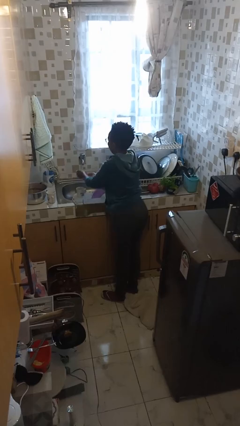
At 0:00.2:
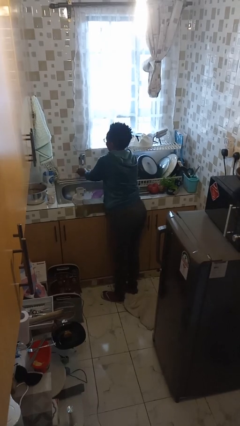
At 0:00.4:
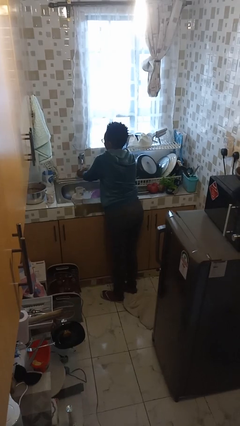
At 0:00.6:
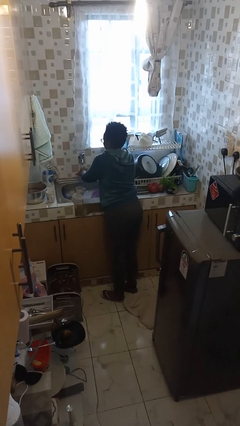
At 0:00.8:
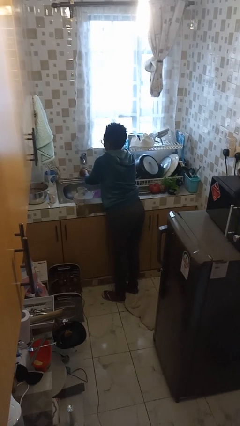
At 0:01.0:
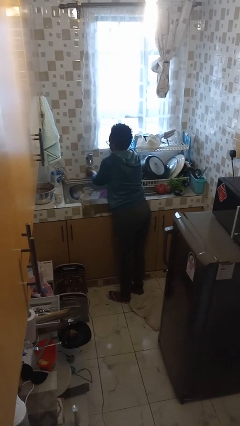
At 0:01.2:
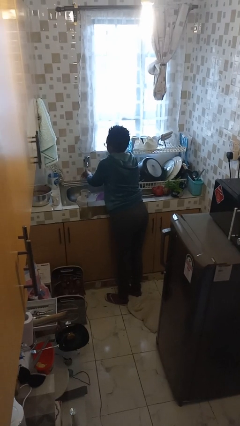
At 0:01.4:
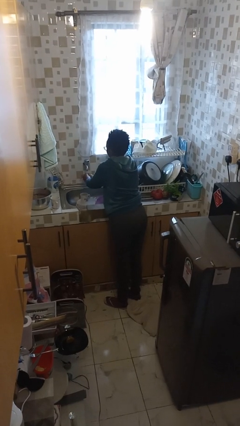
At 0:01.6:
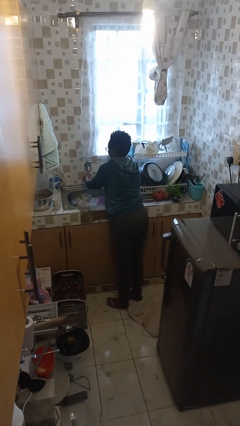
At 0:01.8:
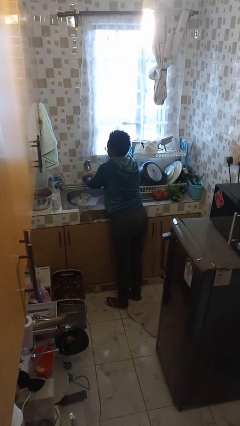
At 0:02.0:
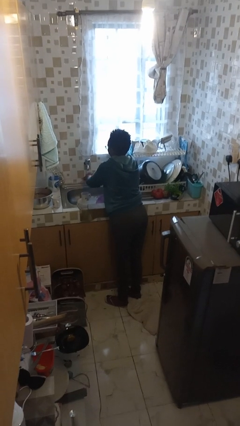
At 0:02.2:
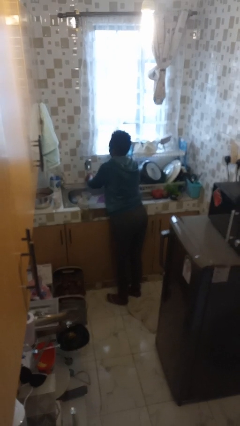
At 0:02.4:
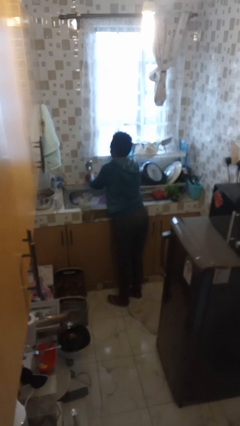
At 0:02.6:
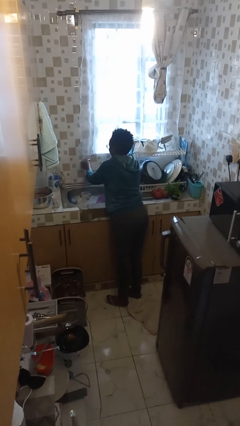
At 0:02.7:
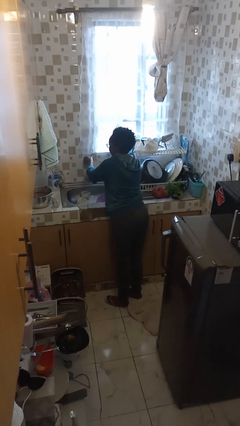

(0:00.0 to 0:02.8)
person washes hands

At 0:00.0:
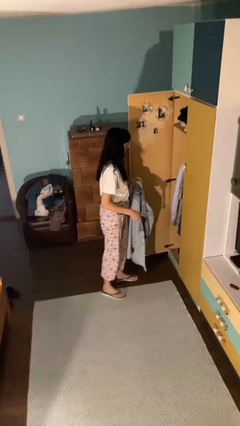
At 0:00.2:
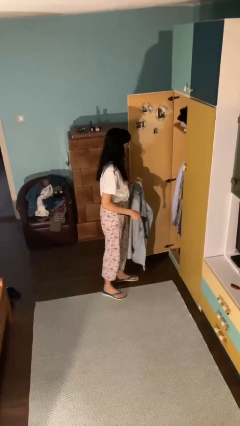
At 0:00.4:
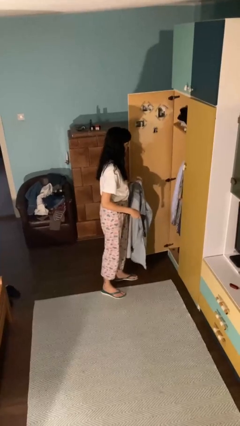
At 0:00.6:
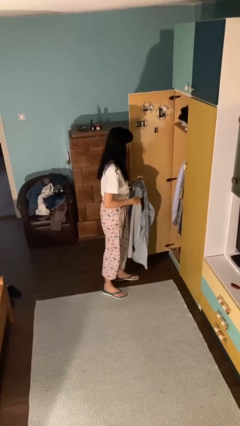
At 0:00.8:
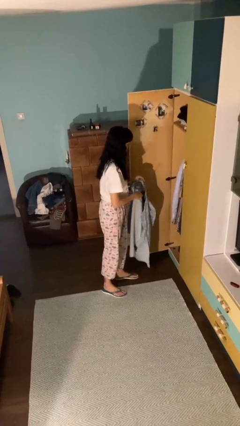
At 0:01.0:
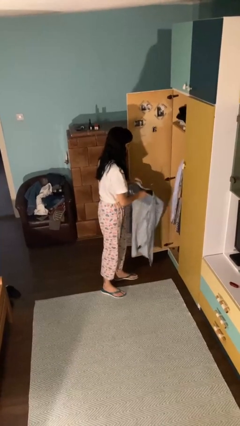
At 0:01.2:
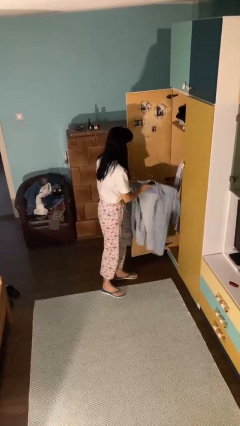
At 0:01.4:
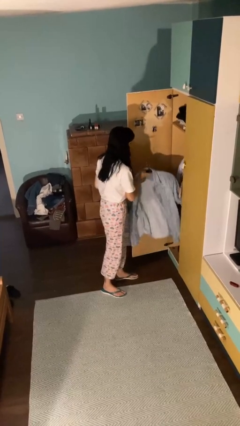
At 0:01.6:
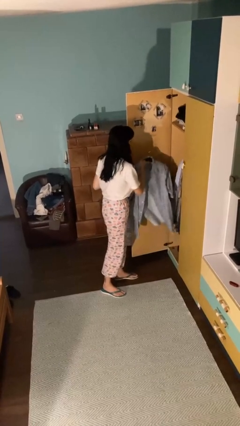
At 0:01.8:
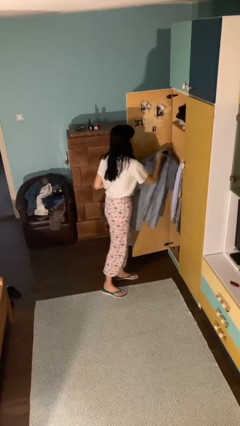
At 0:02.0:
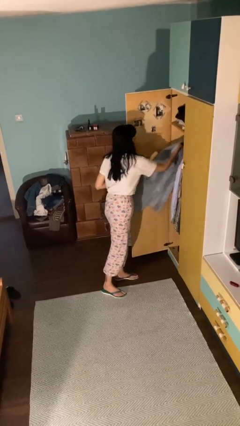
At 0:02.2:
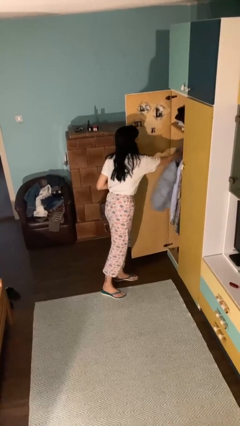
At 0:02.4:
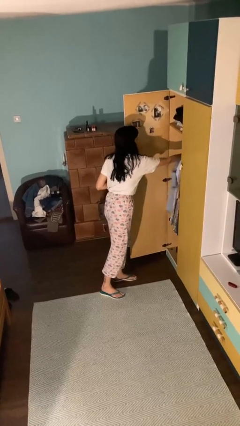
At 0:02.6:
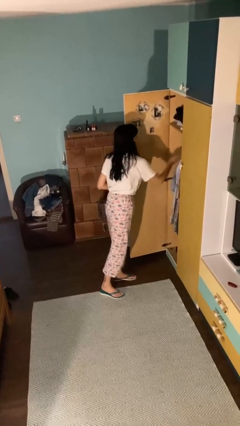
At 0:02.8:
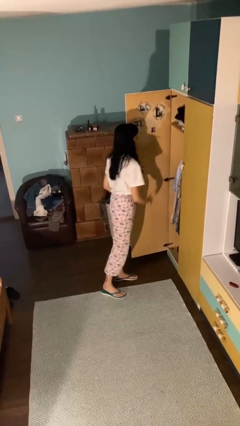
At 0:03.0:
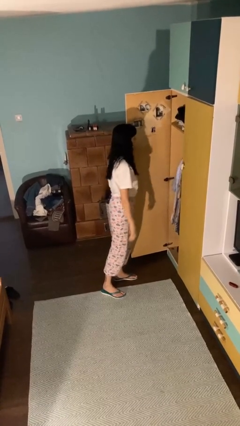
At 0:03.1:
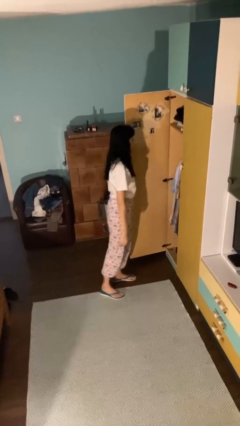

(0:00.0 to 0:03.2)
person puts clothes into closet

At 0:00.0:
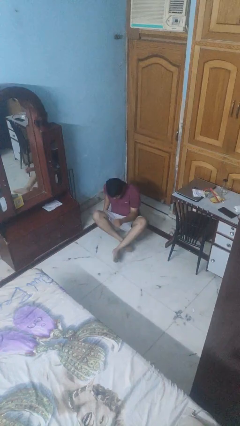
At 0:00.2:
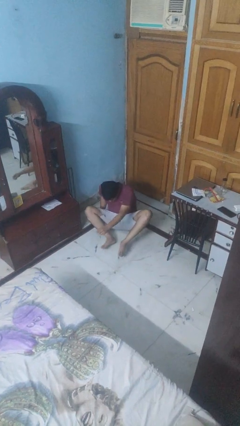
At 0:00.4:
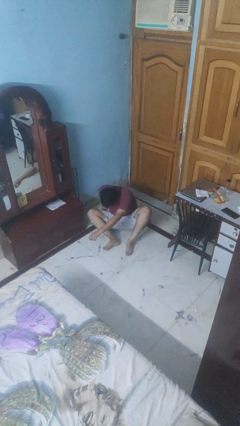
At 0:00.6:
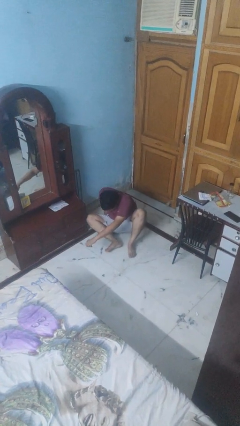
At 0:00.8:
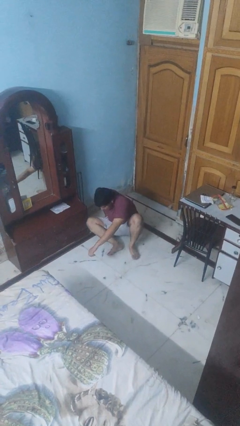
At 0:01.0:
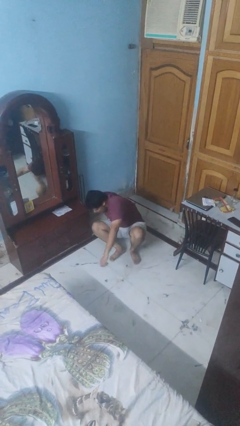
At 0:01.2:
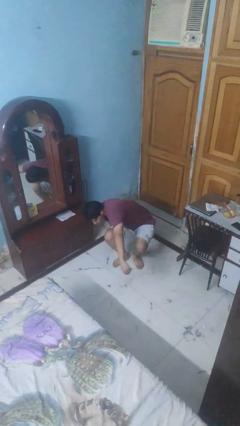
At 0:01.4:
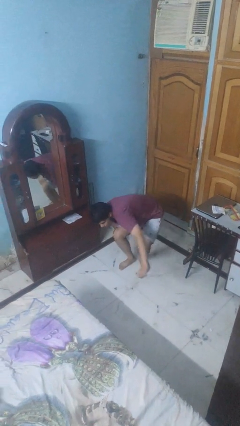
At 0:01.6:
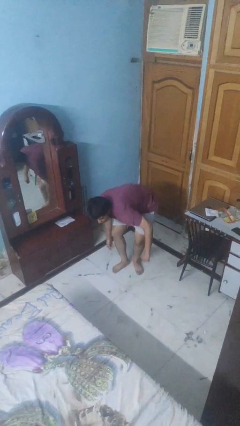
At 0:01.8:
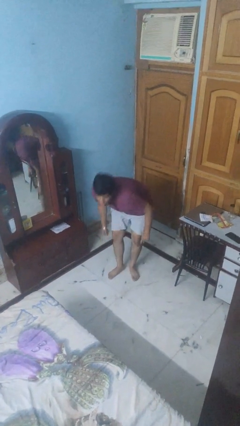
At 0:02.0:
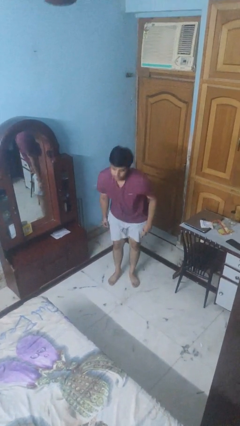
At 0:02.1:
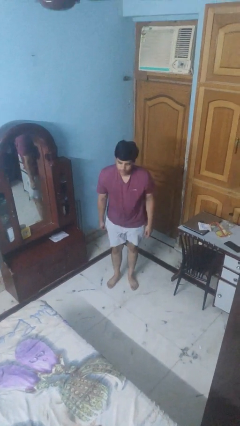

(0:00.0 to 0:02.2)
person stands up from floor

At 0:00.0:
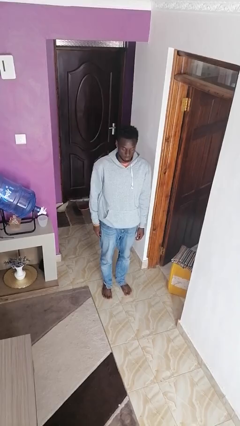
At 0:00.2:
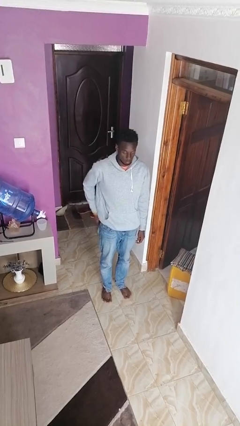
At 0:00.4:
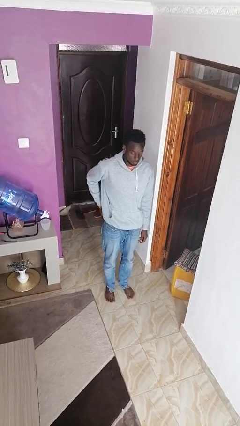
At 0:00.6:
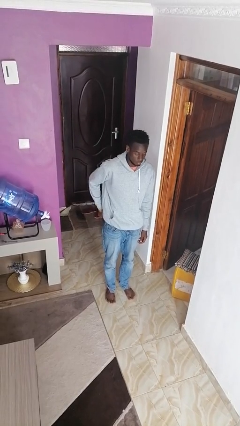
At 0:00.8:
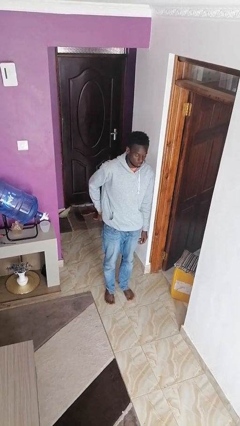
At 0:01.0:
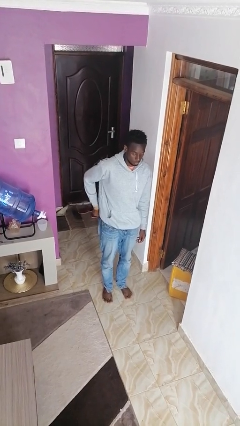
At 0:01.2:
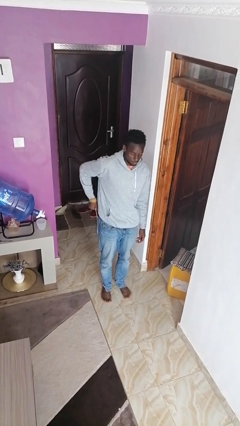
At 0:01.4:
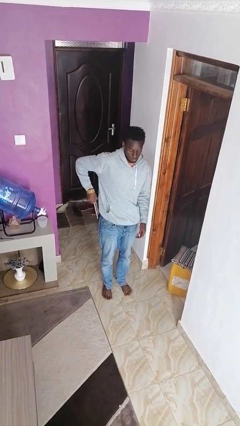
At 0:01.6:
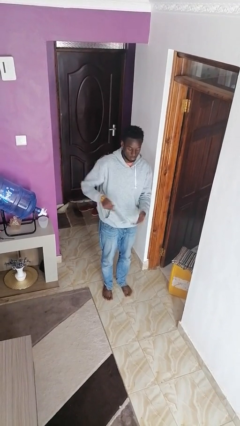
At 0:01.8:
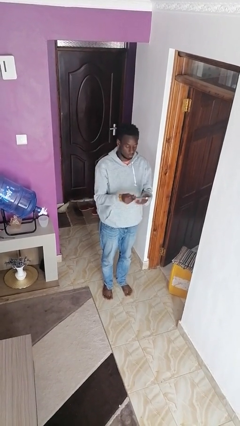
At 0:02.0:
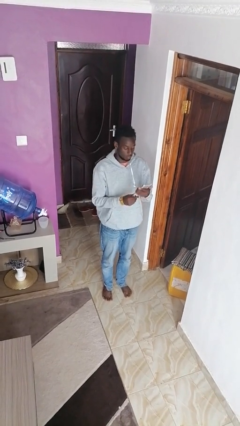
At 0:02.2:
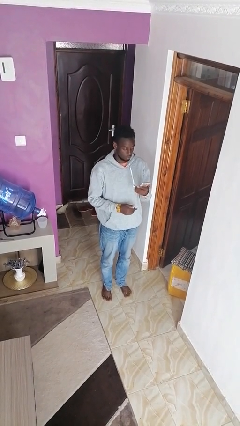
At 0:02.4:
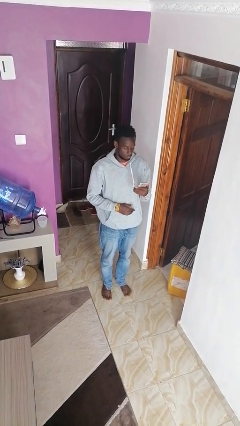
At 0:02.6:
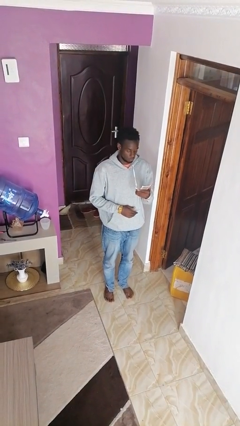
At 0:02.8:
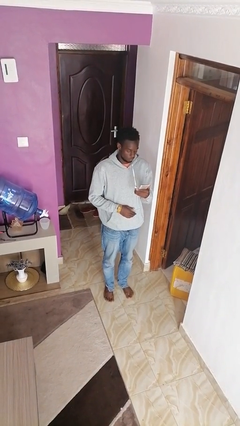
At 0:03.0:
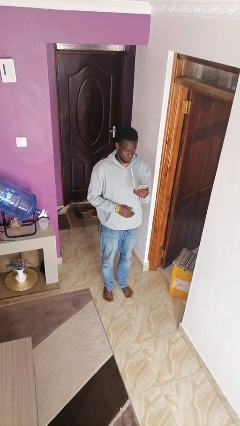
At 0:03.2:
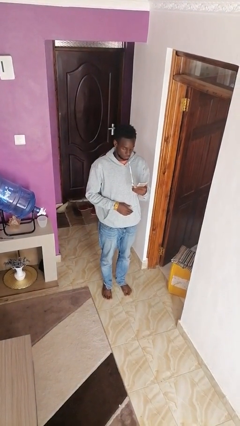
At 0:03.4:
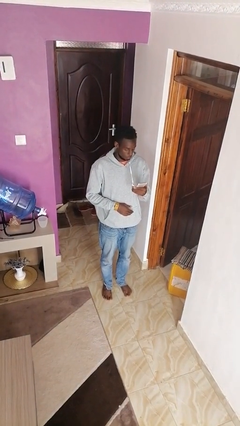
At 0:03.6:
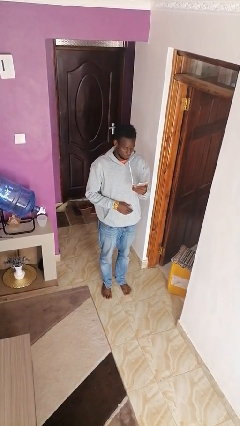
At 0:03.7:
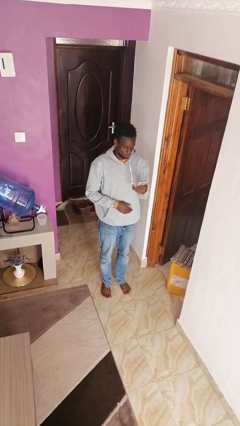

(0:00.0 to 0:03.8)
person takes phone from pocket

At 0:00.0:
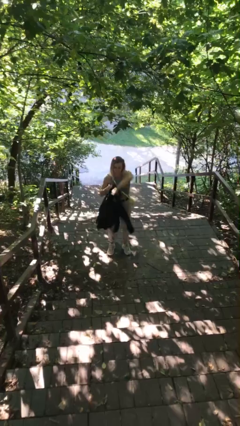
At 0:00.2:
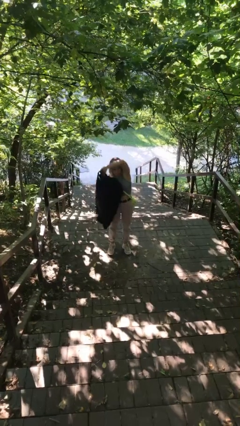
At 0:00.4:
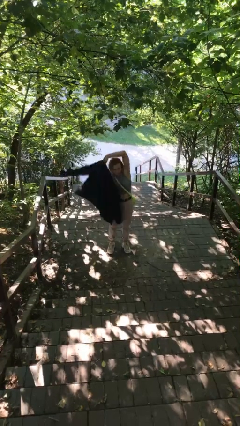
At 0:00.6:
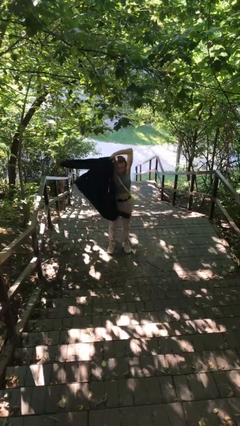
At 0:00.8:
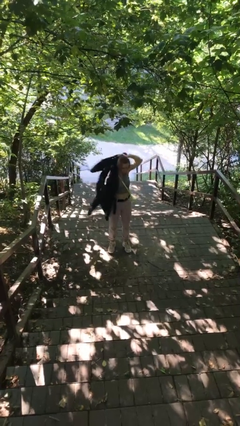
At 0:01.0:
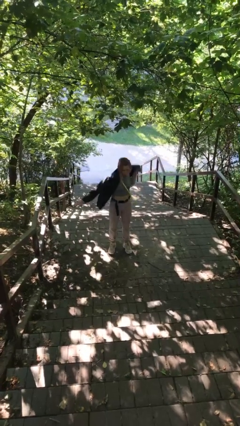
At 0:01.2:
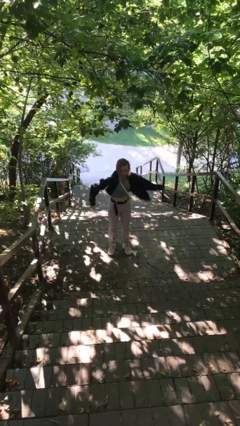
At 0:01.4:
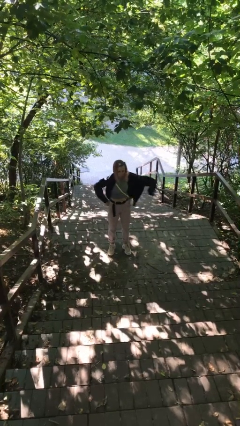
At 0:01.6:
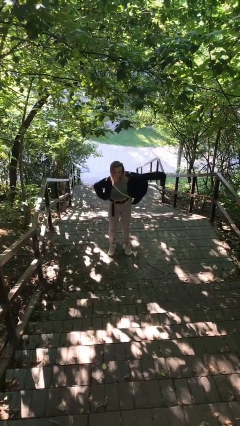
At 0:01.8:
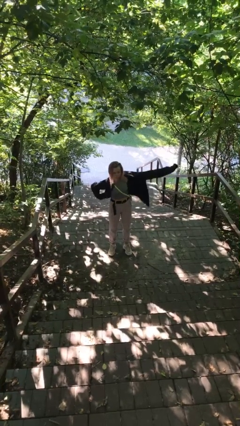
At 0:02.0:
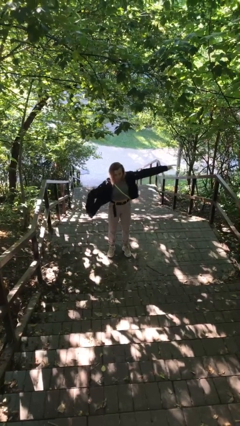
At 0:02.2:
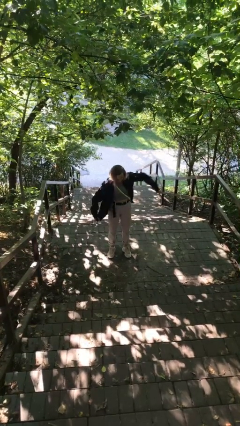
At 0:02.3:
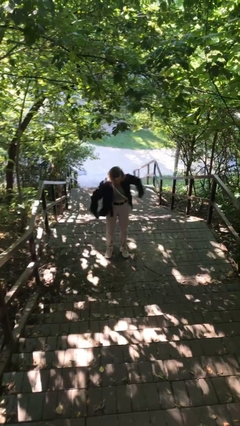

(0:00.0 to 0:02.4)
person puts on jacket

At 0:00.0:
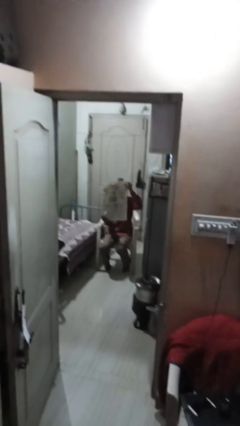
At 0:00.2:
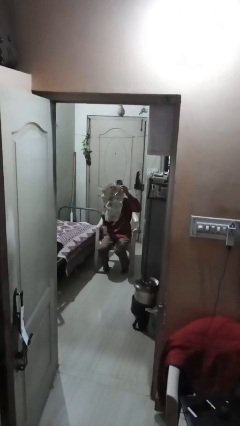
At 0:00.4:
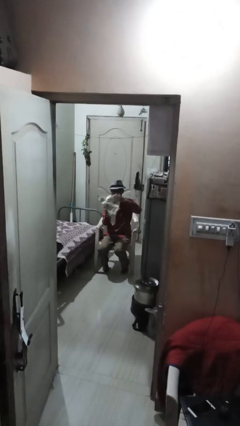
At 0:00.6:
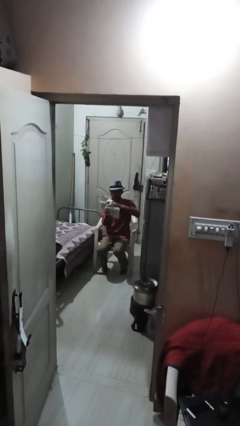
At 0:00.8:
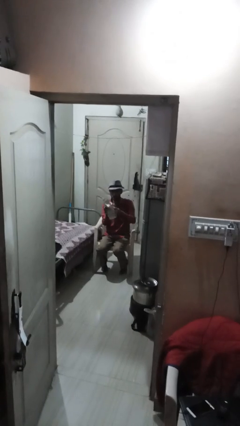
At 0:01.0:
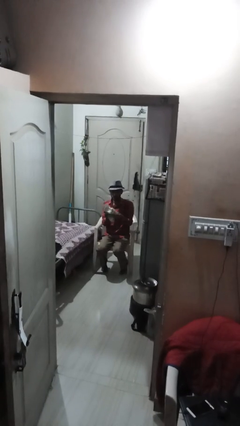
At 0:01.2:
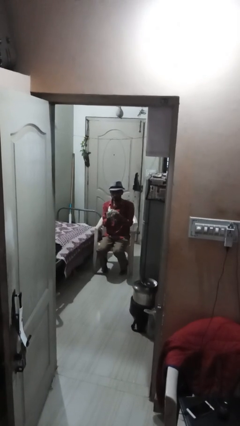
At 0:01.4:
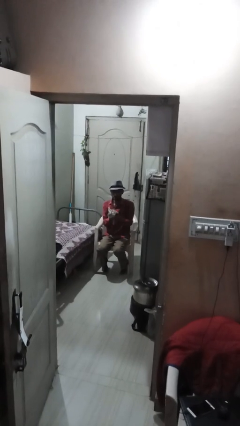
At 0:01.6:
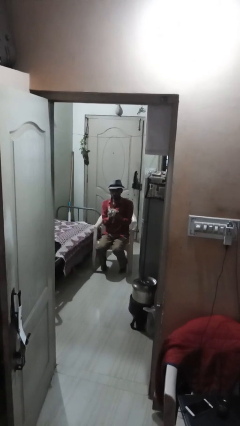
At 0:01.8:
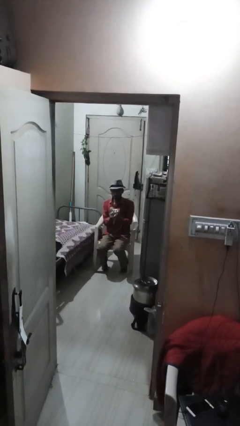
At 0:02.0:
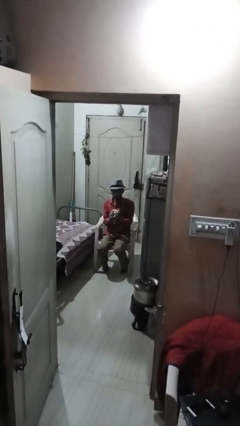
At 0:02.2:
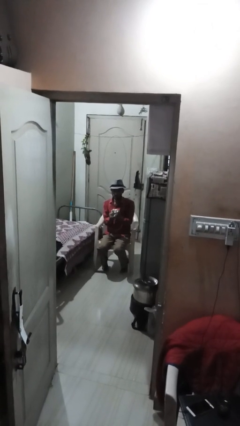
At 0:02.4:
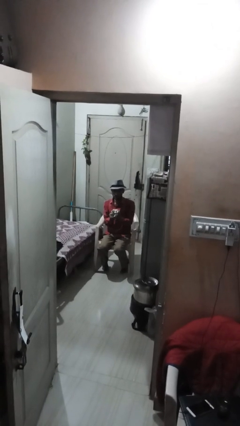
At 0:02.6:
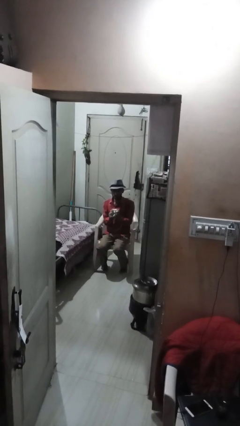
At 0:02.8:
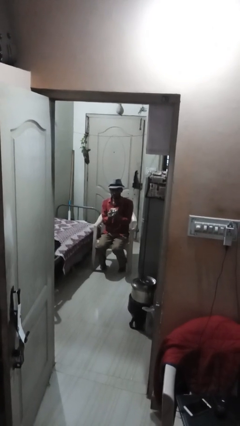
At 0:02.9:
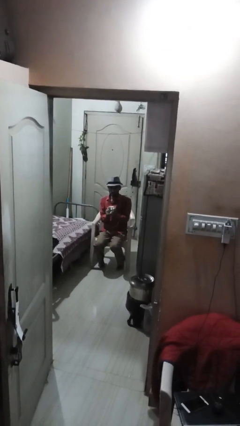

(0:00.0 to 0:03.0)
person crumples paper
